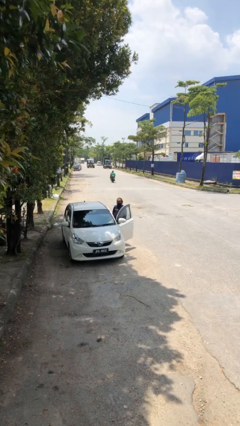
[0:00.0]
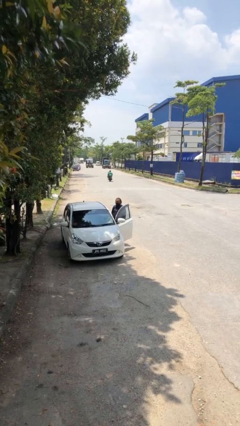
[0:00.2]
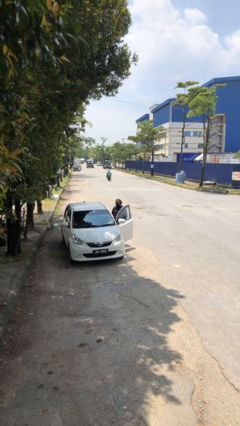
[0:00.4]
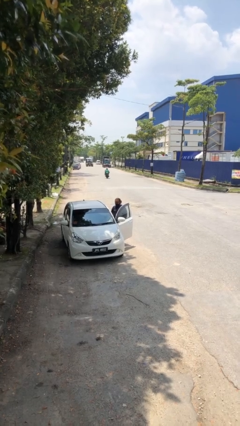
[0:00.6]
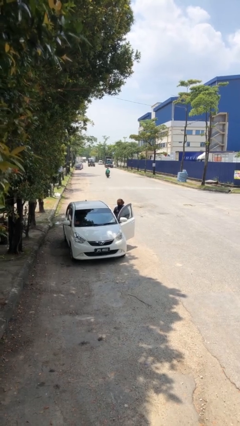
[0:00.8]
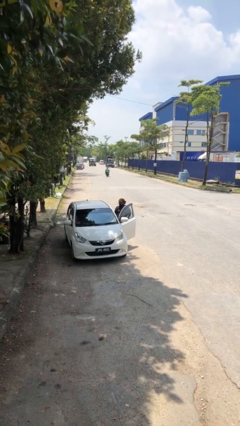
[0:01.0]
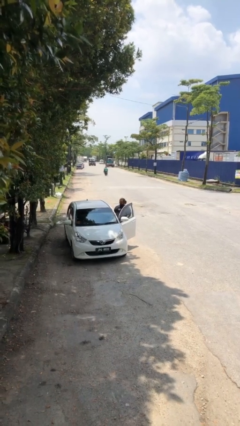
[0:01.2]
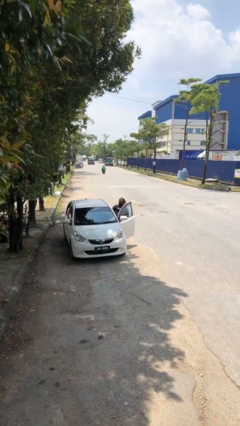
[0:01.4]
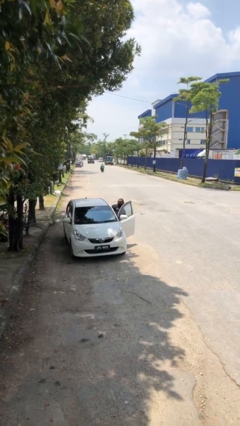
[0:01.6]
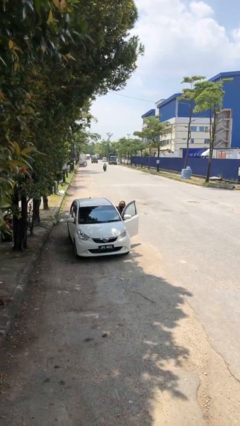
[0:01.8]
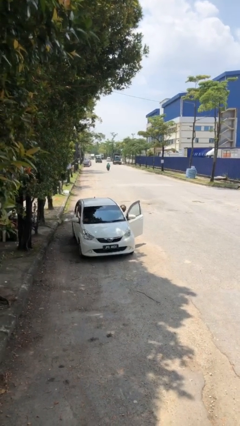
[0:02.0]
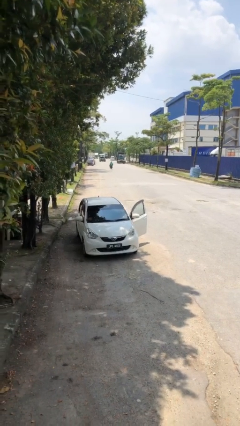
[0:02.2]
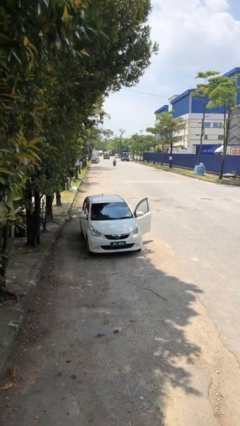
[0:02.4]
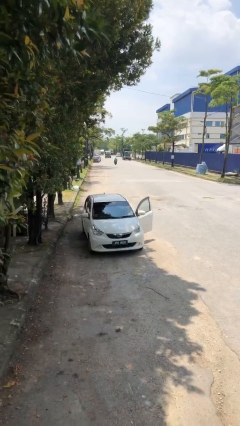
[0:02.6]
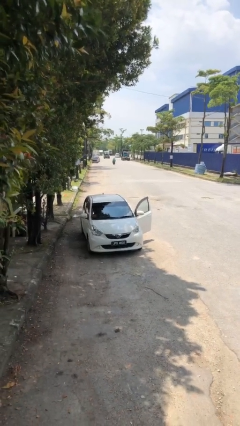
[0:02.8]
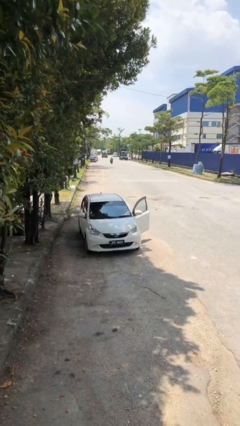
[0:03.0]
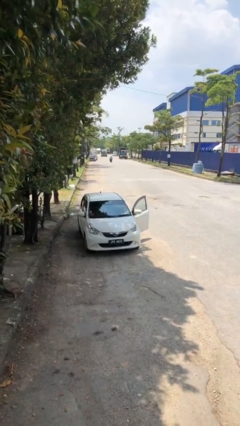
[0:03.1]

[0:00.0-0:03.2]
person enters car

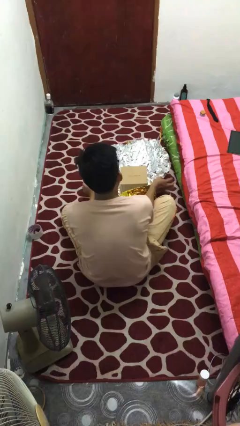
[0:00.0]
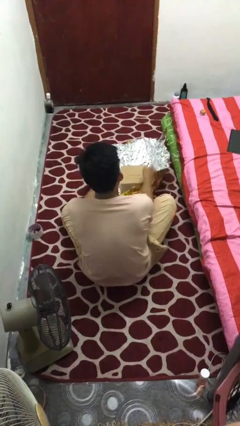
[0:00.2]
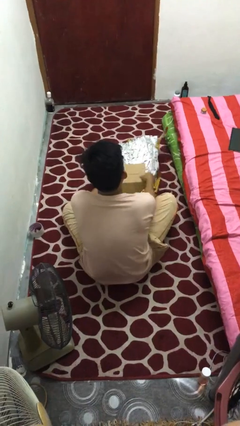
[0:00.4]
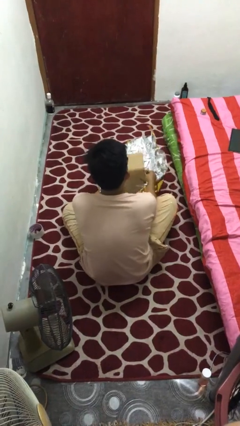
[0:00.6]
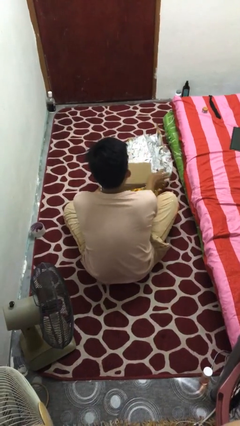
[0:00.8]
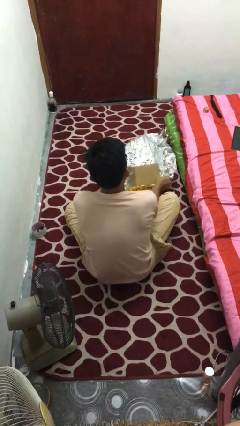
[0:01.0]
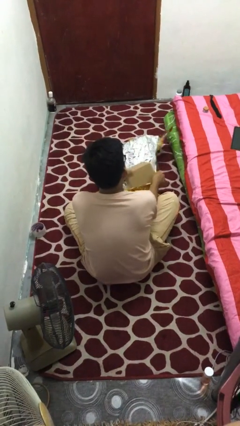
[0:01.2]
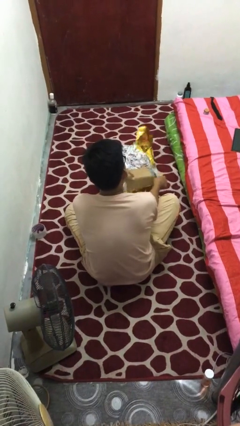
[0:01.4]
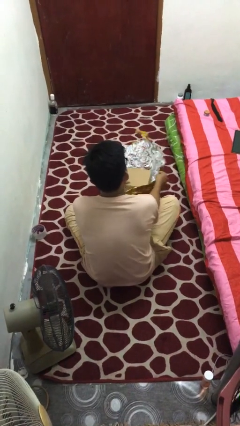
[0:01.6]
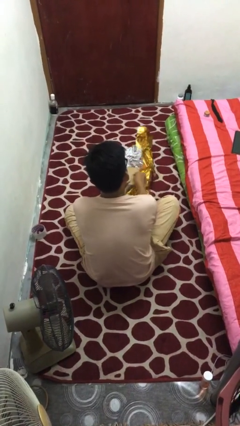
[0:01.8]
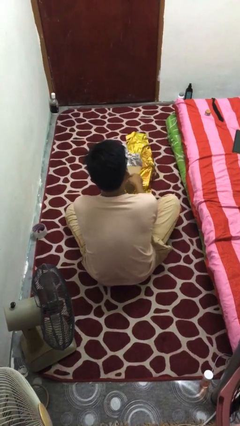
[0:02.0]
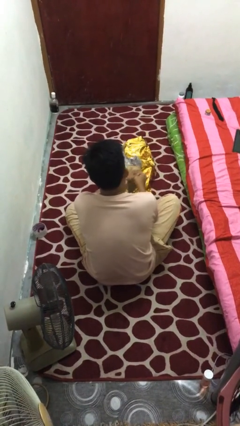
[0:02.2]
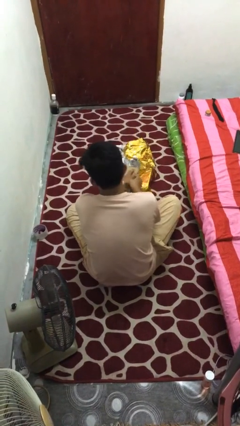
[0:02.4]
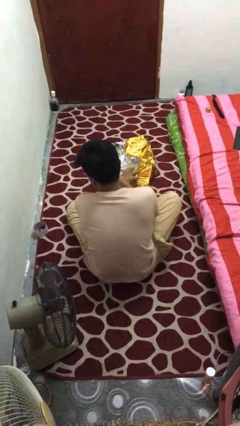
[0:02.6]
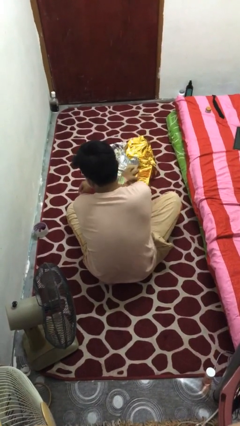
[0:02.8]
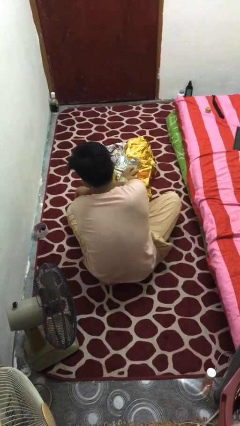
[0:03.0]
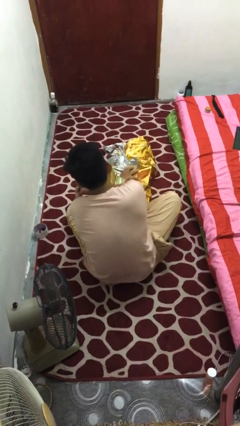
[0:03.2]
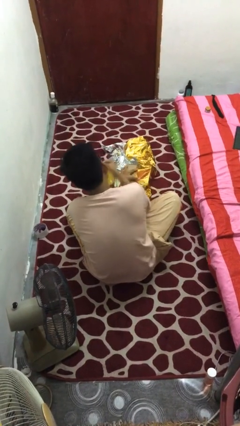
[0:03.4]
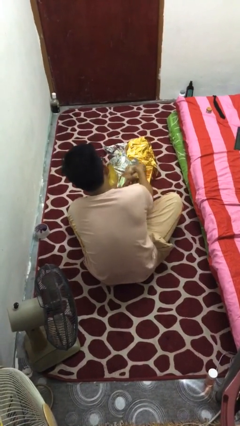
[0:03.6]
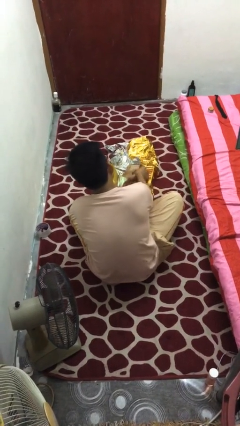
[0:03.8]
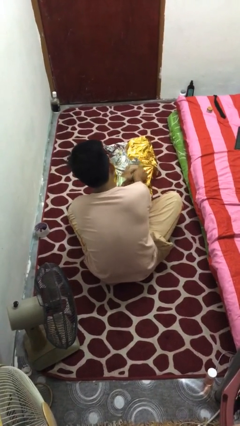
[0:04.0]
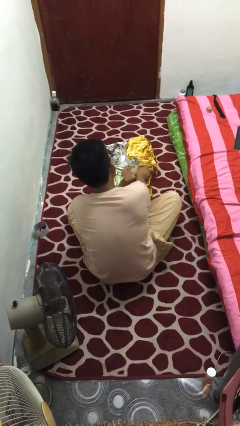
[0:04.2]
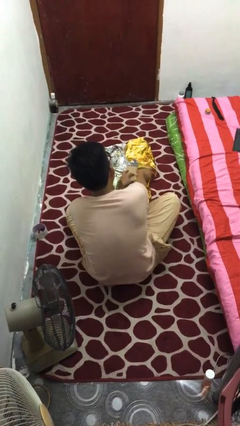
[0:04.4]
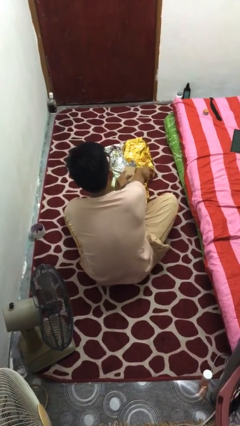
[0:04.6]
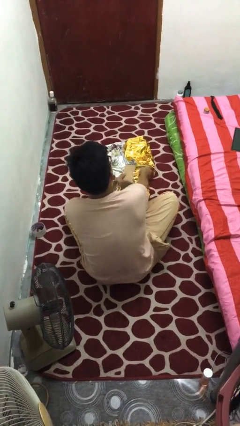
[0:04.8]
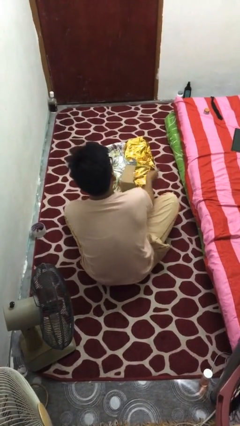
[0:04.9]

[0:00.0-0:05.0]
person wraps box

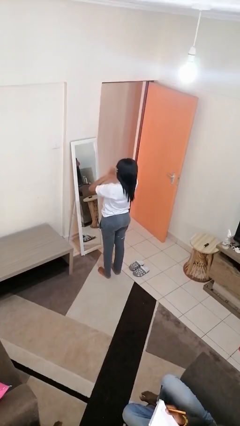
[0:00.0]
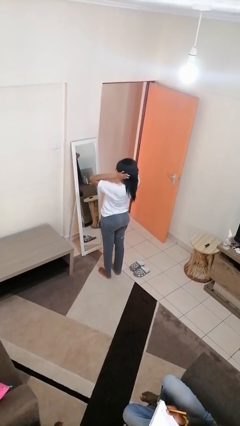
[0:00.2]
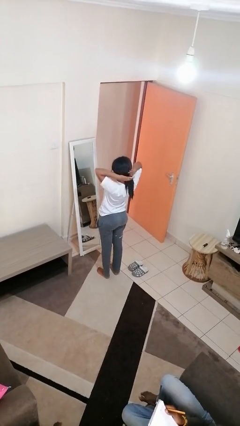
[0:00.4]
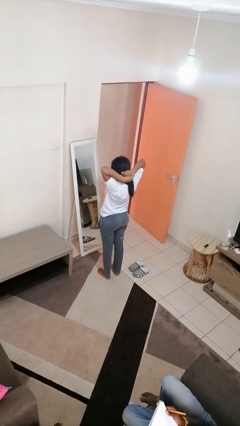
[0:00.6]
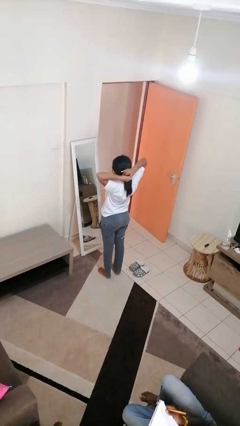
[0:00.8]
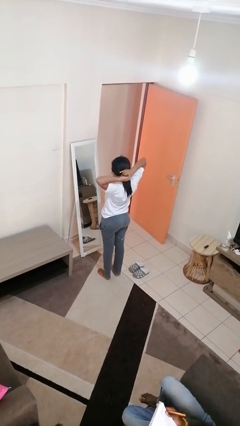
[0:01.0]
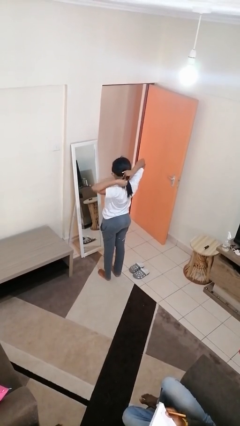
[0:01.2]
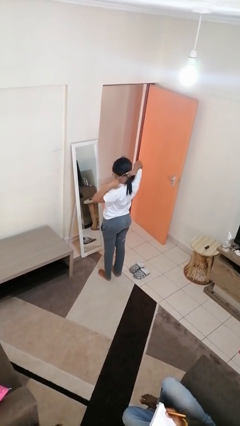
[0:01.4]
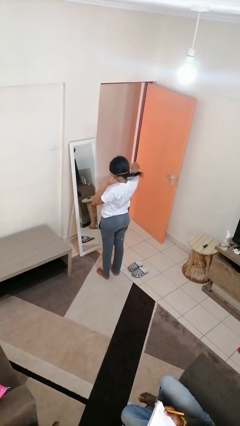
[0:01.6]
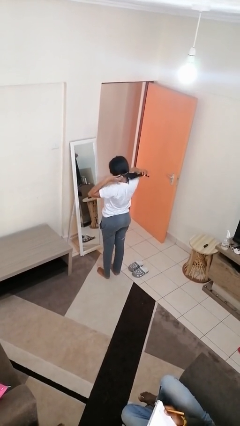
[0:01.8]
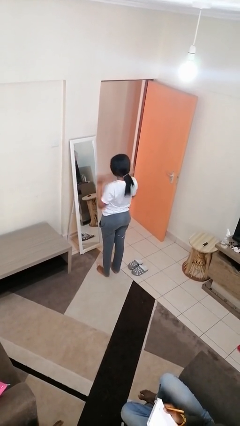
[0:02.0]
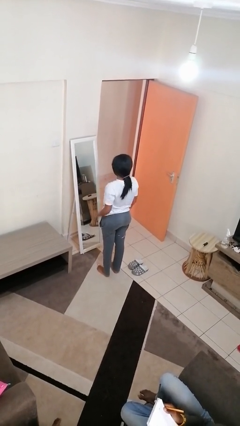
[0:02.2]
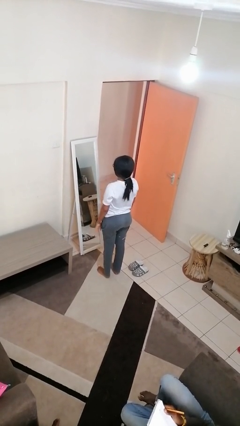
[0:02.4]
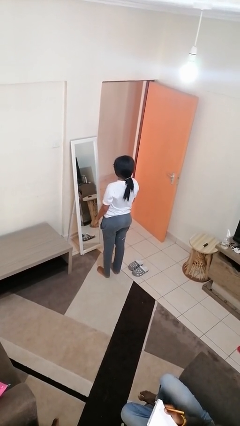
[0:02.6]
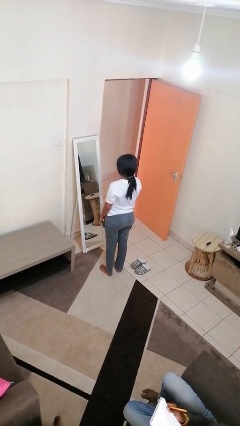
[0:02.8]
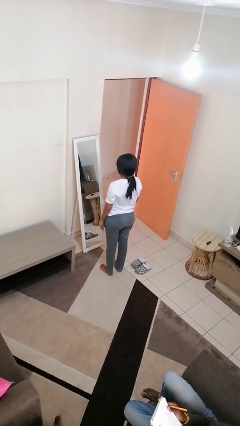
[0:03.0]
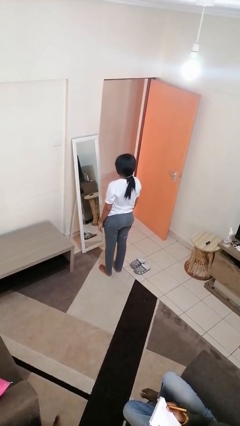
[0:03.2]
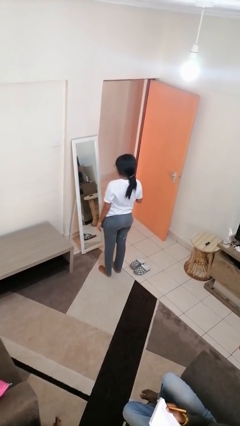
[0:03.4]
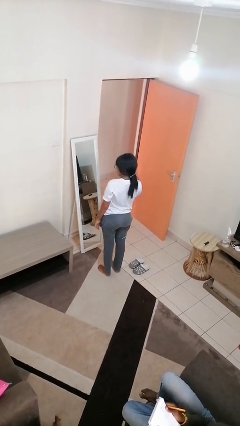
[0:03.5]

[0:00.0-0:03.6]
person puts hair in ponytail

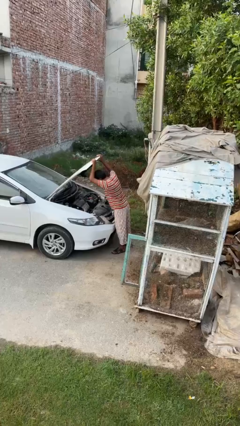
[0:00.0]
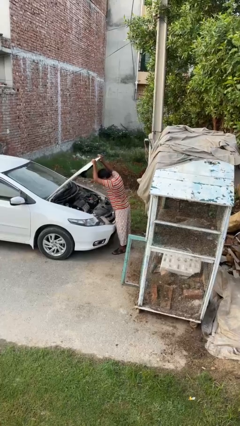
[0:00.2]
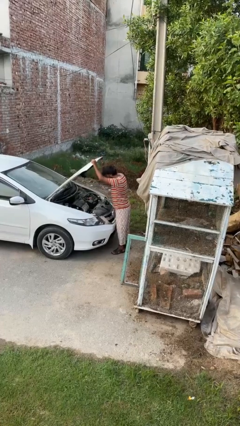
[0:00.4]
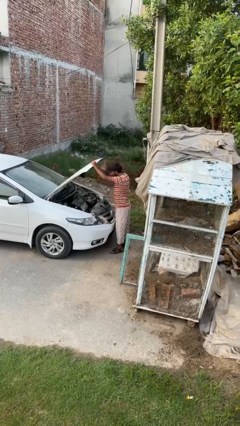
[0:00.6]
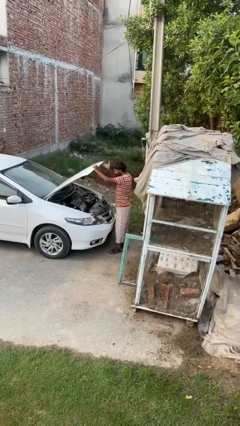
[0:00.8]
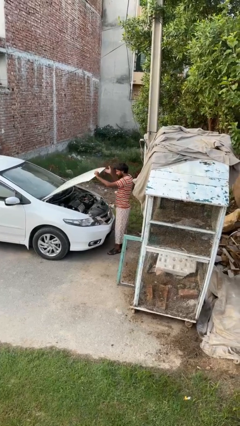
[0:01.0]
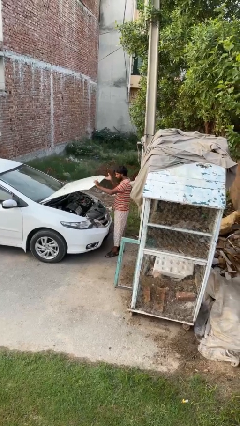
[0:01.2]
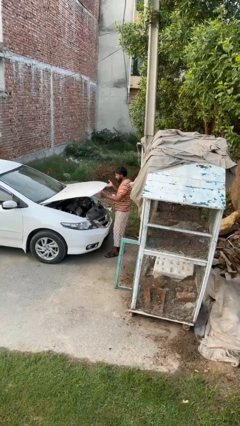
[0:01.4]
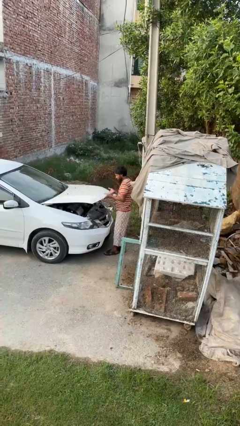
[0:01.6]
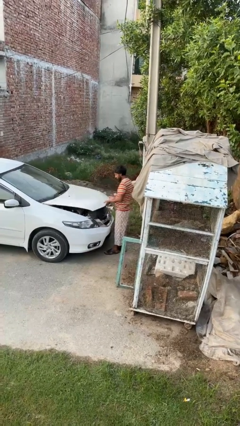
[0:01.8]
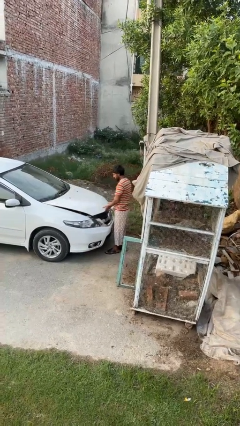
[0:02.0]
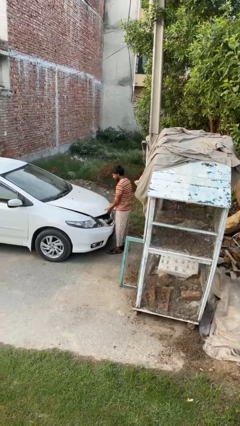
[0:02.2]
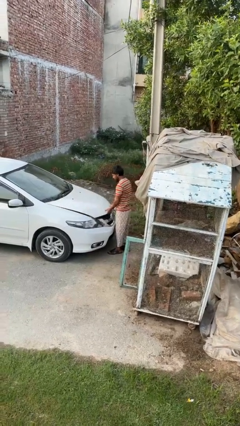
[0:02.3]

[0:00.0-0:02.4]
person closes car hood

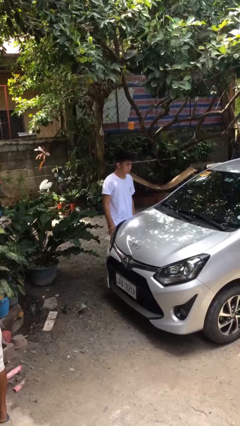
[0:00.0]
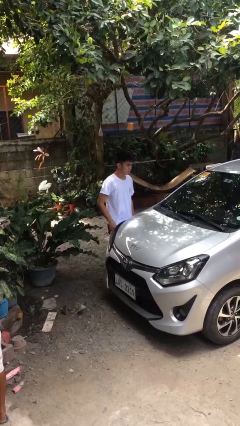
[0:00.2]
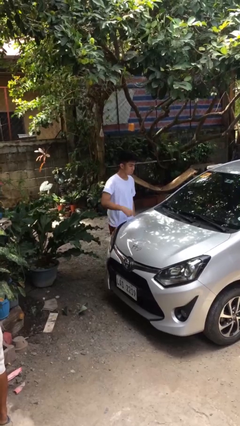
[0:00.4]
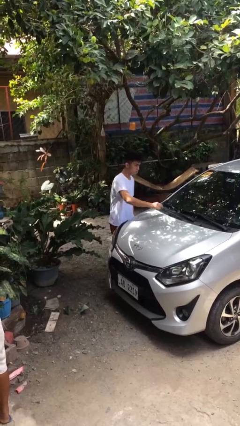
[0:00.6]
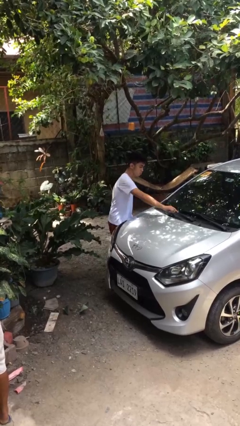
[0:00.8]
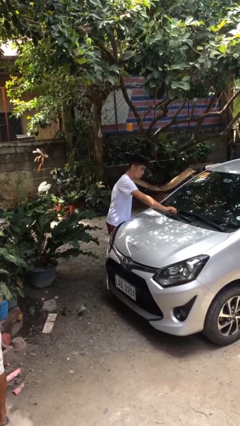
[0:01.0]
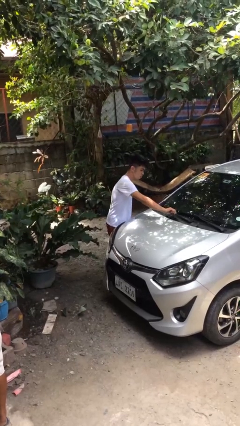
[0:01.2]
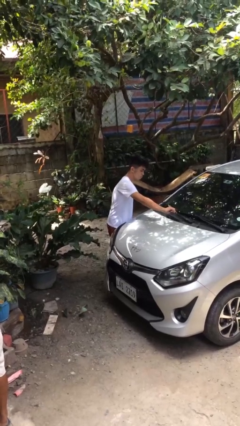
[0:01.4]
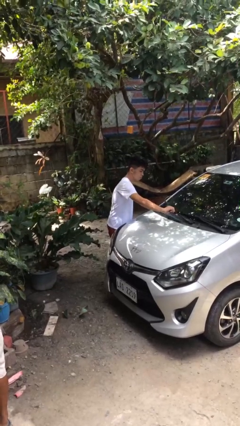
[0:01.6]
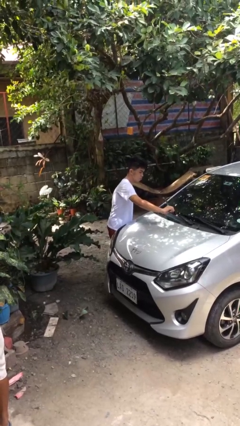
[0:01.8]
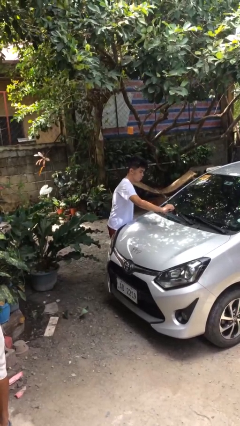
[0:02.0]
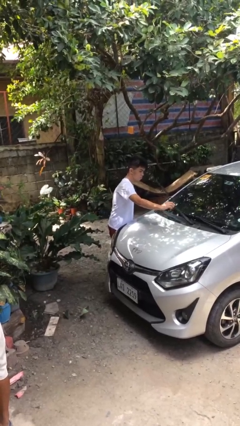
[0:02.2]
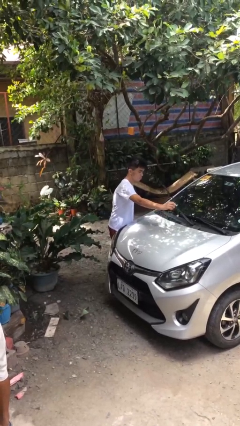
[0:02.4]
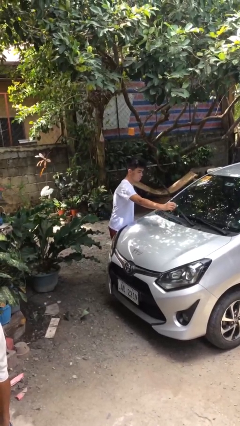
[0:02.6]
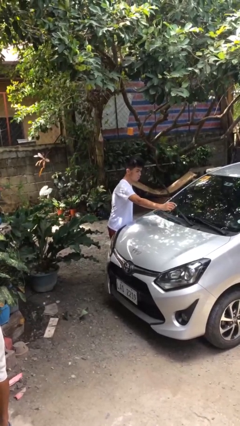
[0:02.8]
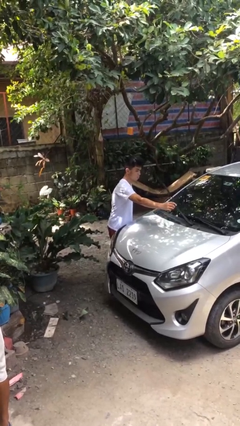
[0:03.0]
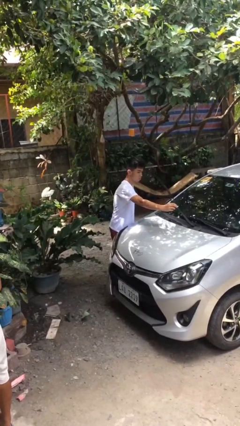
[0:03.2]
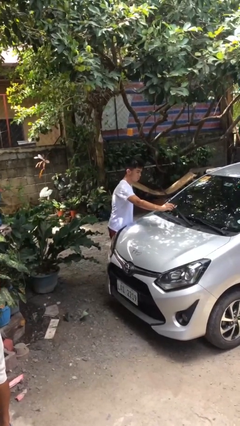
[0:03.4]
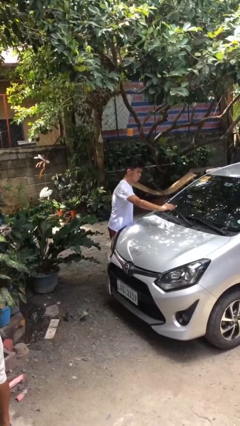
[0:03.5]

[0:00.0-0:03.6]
person flips up car wipers
